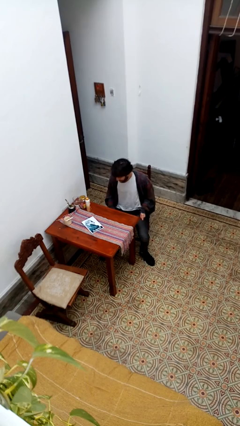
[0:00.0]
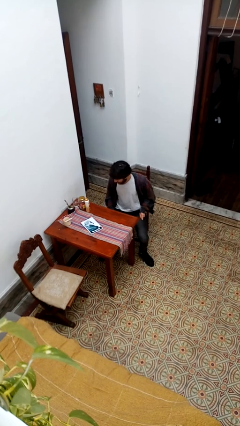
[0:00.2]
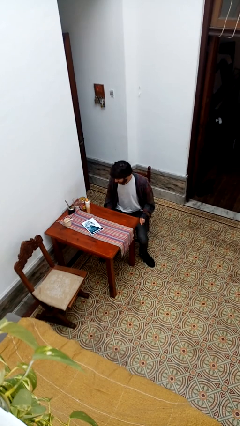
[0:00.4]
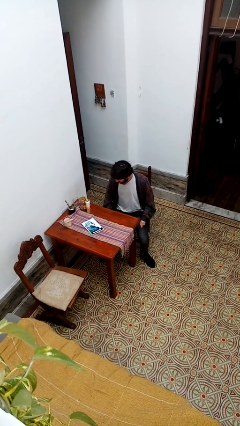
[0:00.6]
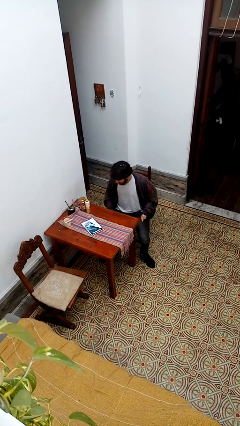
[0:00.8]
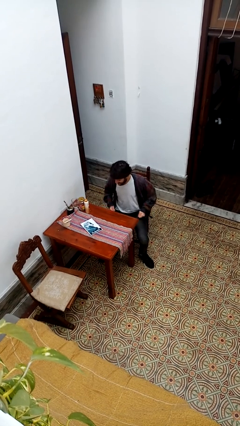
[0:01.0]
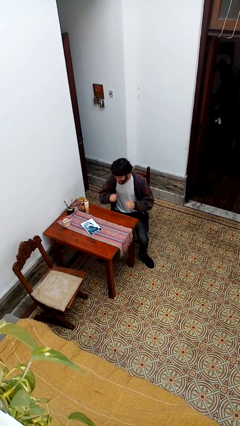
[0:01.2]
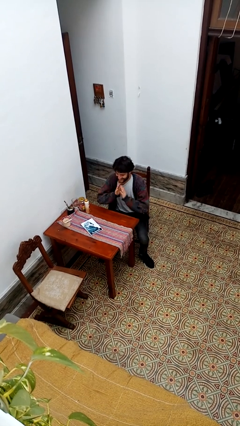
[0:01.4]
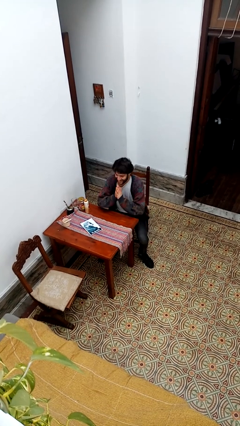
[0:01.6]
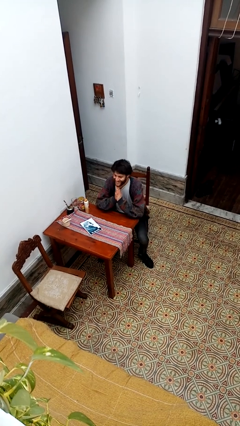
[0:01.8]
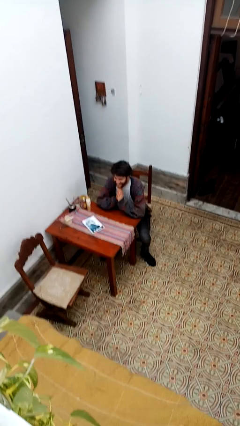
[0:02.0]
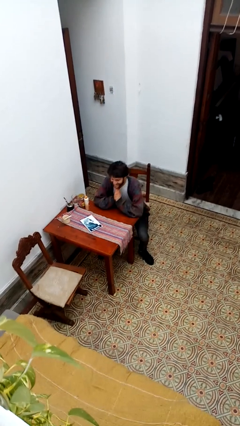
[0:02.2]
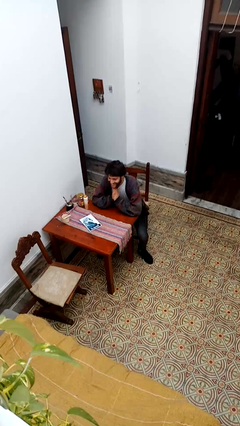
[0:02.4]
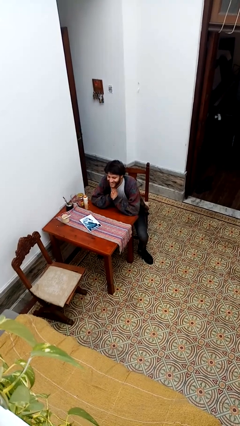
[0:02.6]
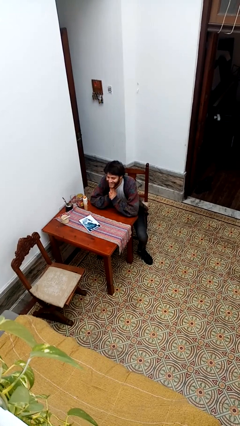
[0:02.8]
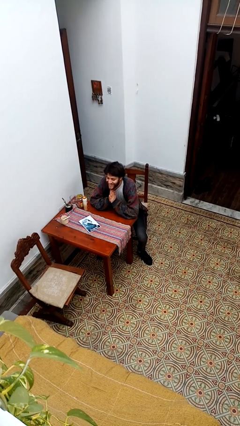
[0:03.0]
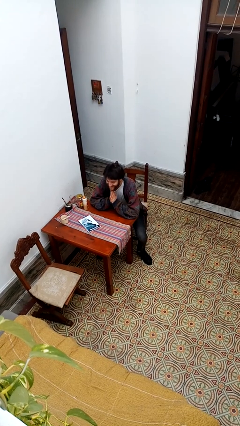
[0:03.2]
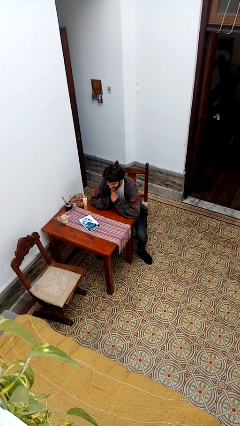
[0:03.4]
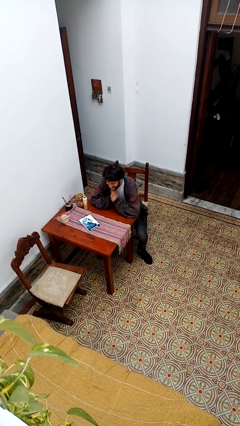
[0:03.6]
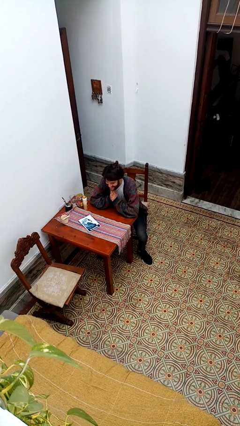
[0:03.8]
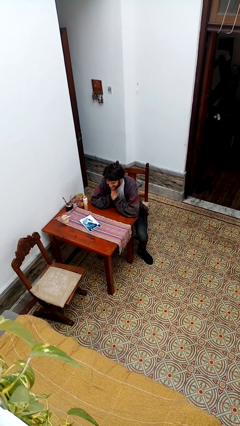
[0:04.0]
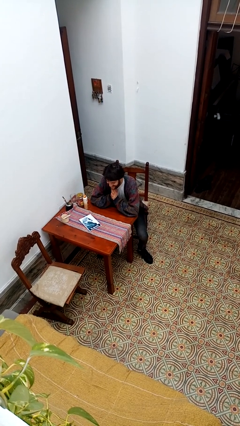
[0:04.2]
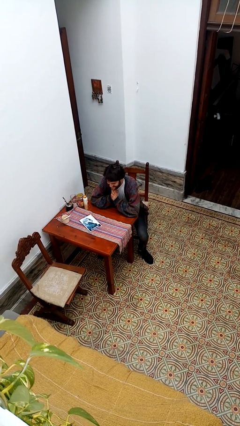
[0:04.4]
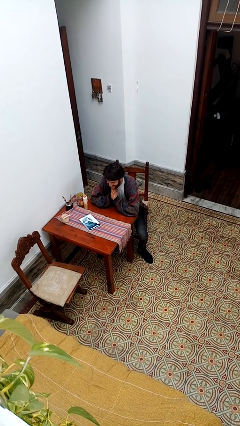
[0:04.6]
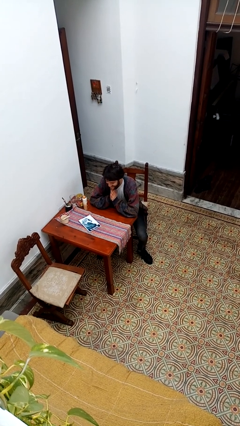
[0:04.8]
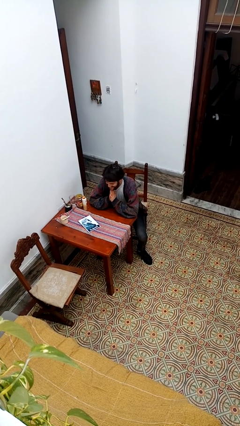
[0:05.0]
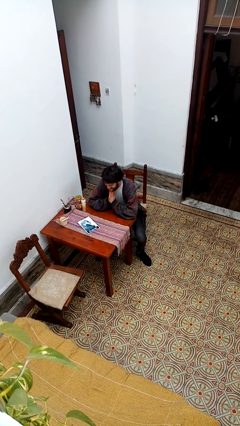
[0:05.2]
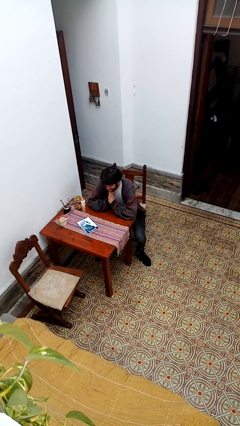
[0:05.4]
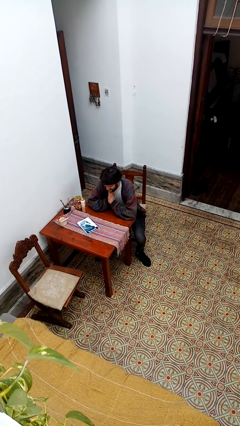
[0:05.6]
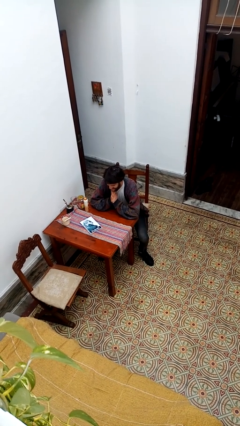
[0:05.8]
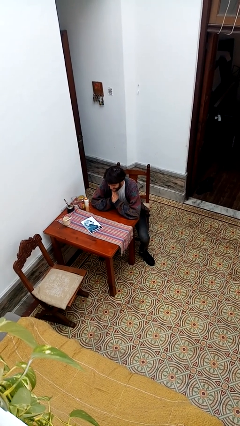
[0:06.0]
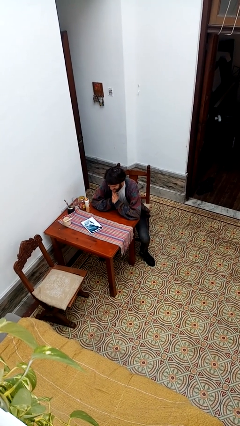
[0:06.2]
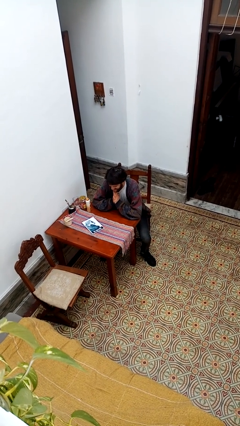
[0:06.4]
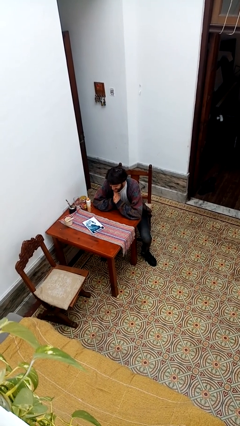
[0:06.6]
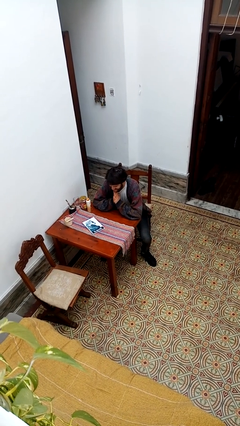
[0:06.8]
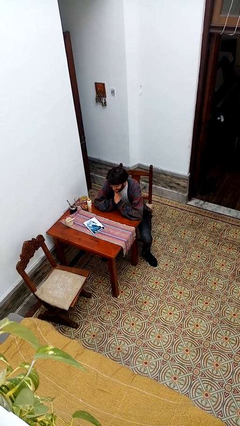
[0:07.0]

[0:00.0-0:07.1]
person prays

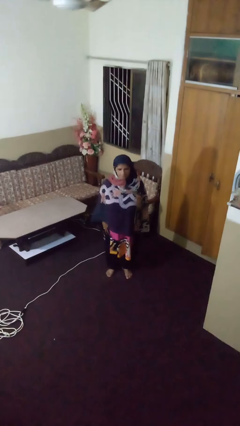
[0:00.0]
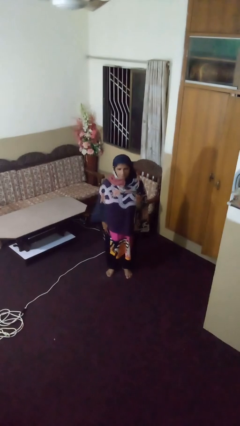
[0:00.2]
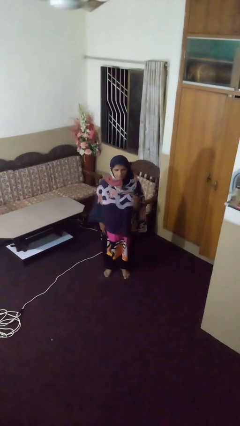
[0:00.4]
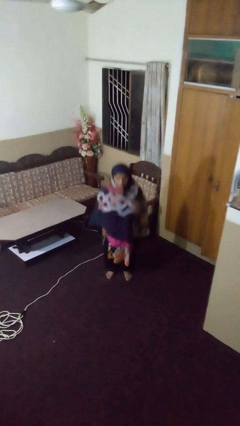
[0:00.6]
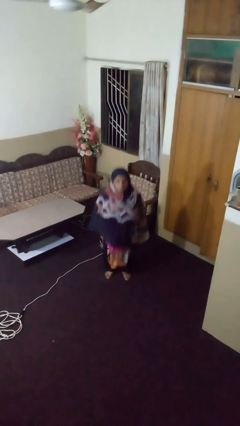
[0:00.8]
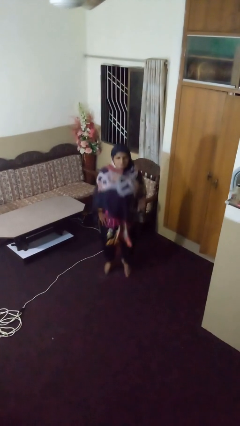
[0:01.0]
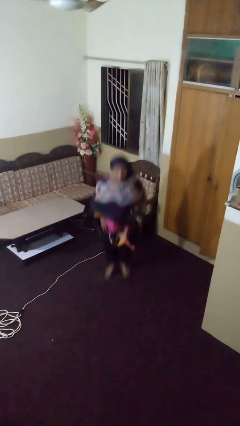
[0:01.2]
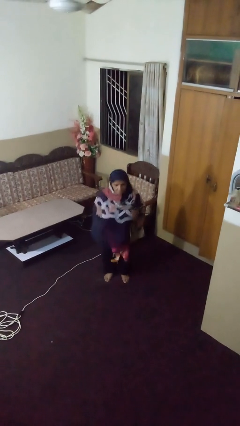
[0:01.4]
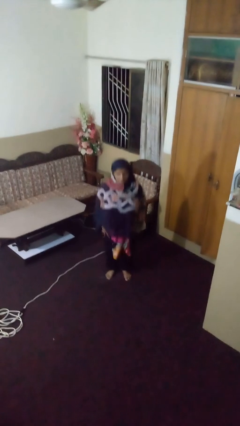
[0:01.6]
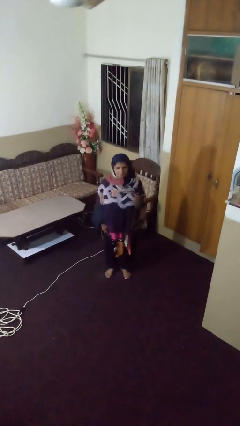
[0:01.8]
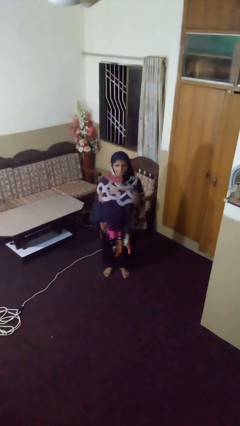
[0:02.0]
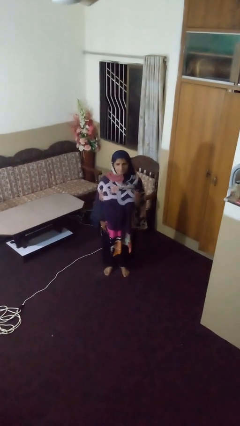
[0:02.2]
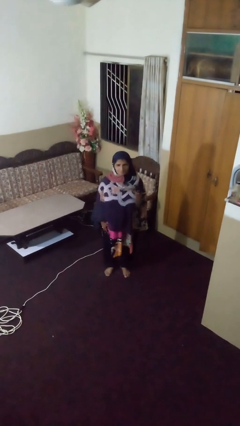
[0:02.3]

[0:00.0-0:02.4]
person jumps

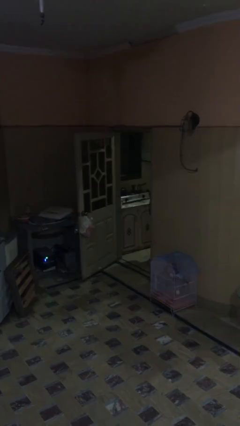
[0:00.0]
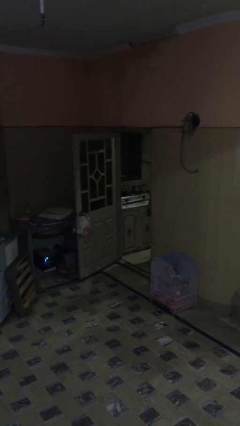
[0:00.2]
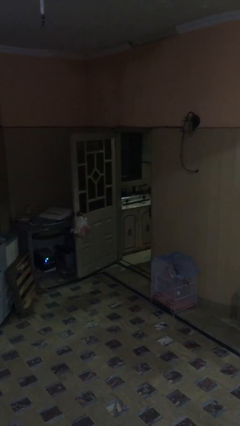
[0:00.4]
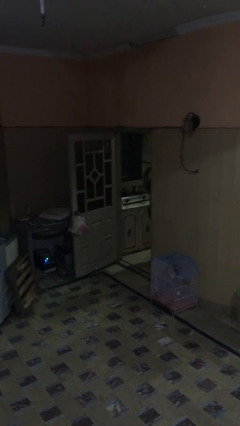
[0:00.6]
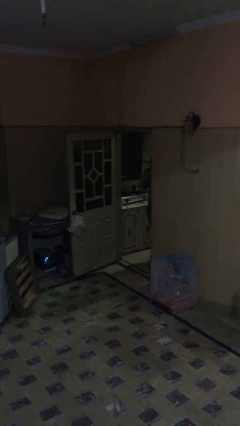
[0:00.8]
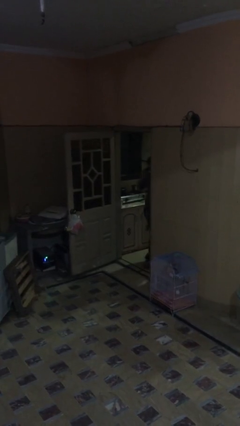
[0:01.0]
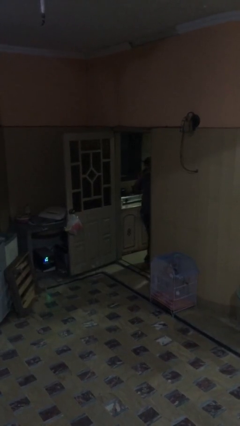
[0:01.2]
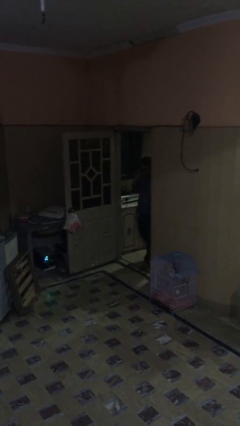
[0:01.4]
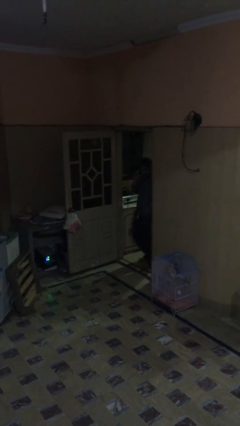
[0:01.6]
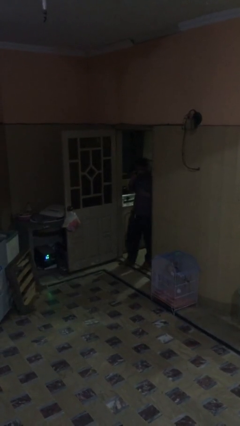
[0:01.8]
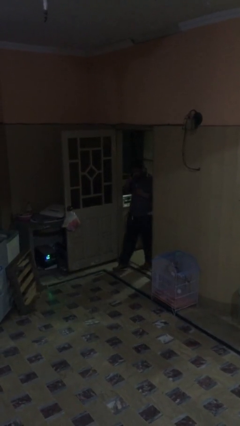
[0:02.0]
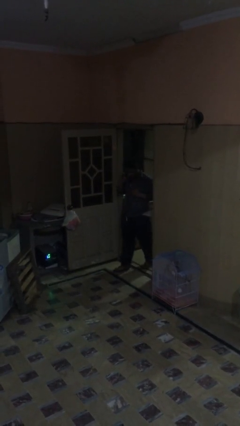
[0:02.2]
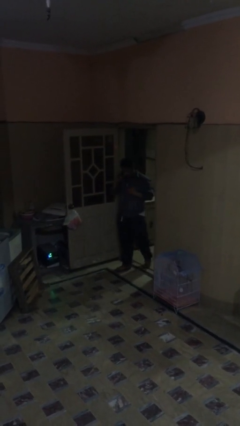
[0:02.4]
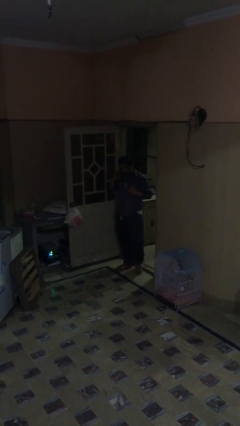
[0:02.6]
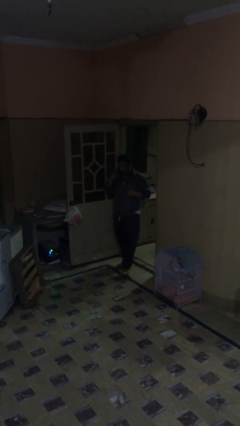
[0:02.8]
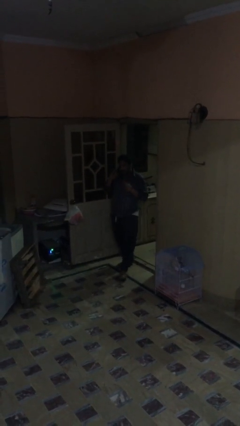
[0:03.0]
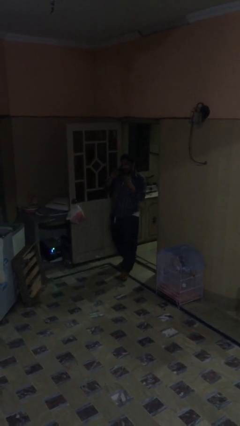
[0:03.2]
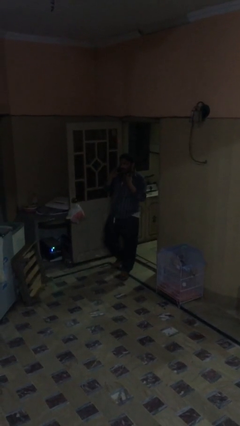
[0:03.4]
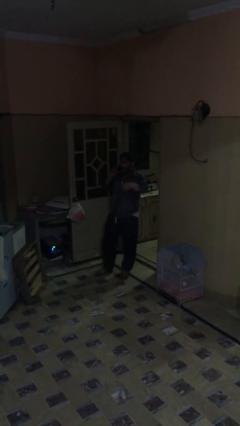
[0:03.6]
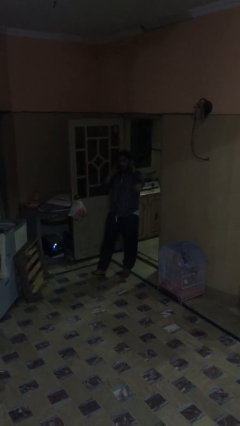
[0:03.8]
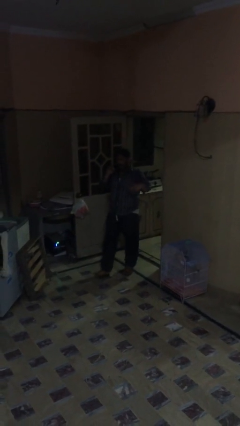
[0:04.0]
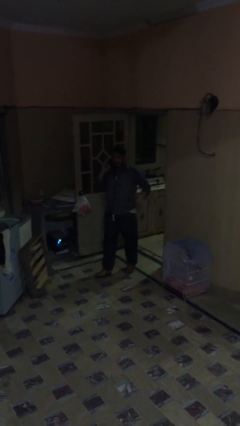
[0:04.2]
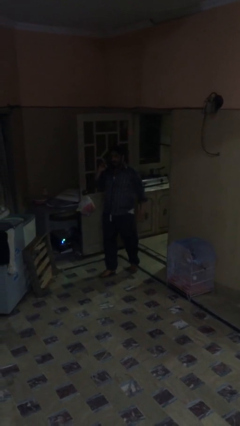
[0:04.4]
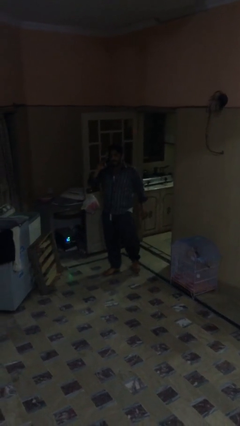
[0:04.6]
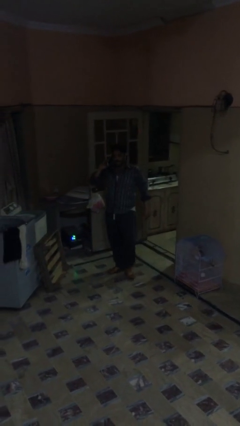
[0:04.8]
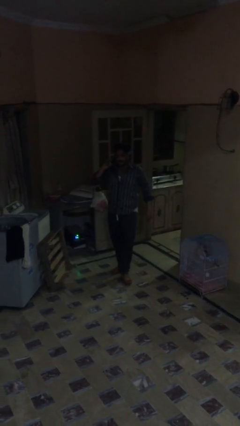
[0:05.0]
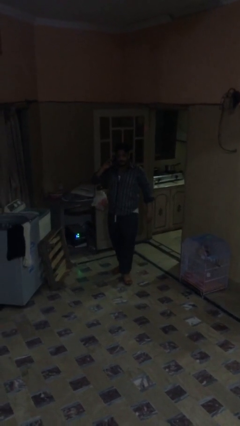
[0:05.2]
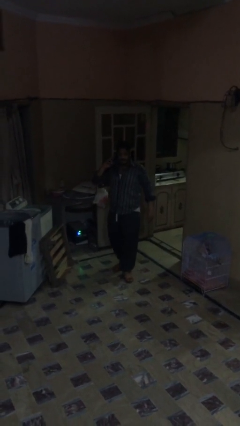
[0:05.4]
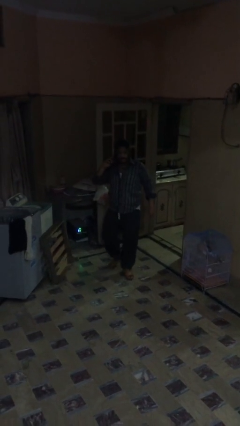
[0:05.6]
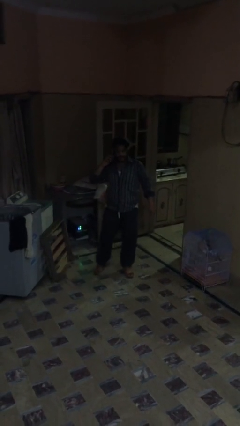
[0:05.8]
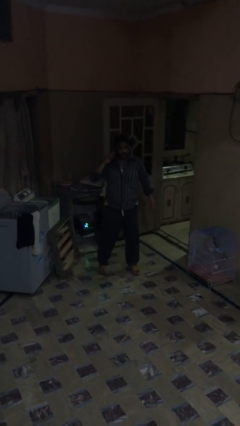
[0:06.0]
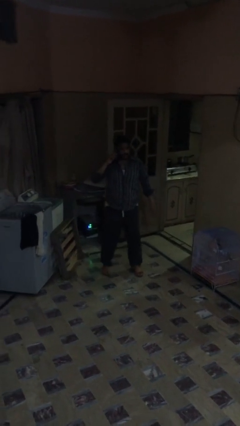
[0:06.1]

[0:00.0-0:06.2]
person enters scene through structure

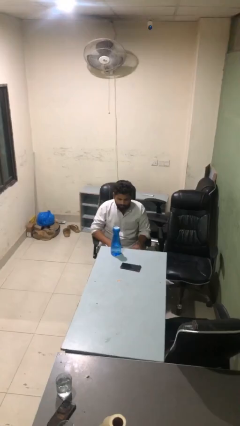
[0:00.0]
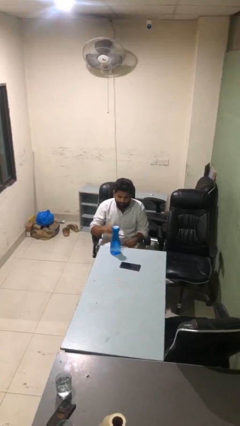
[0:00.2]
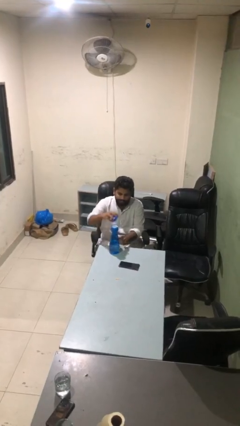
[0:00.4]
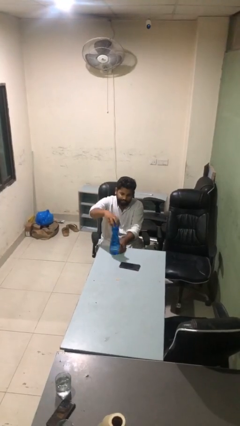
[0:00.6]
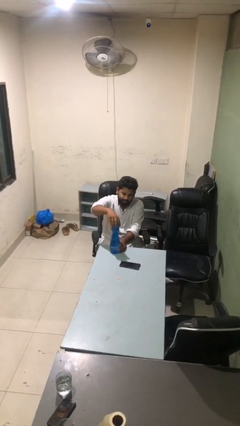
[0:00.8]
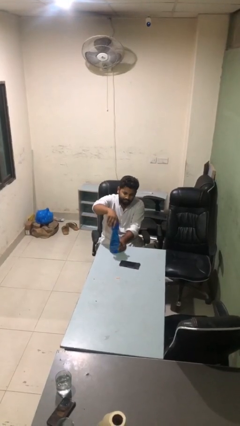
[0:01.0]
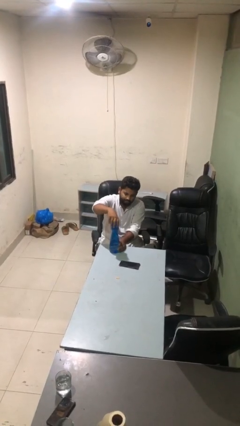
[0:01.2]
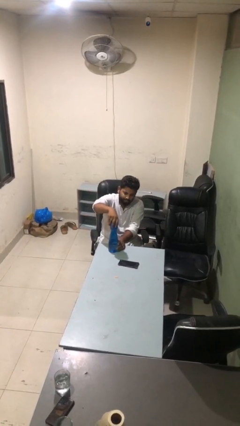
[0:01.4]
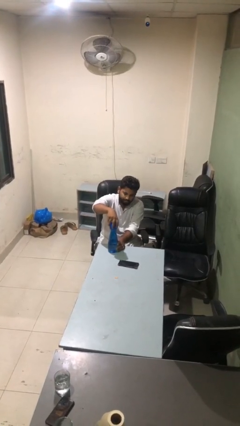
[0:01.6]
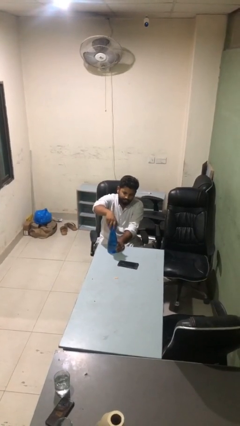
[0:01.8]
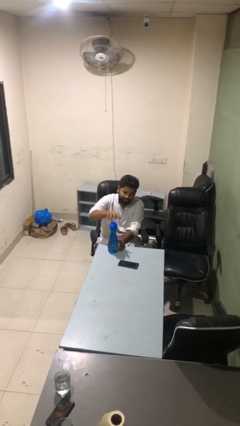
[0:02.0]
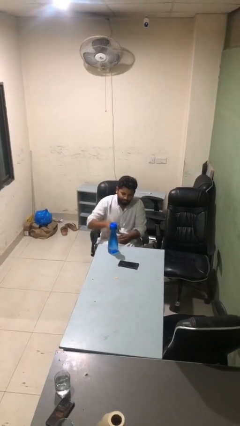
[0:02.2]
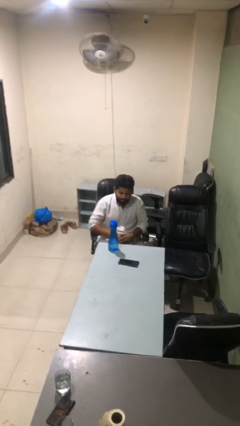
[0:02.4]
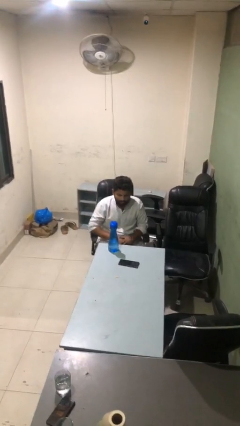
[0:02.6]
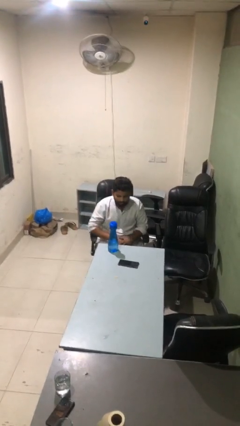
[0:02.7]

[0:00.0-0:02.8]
person screws lid to bottle
